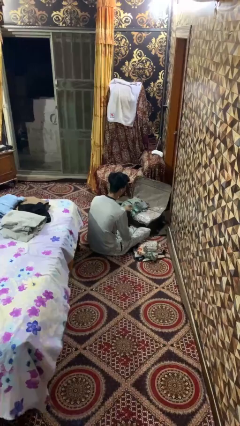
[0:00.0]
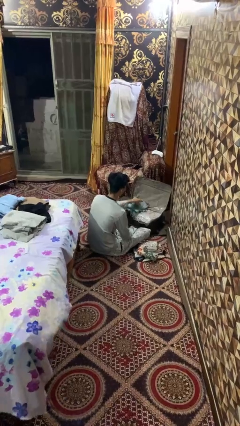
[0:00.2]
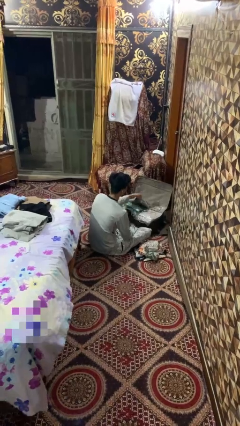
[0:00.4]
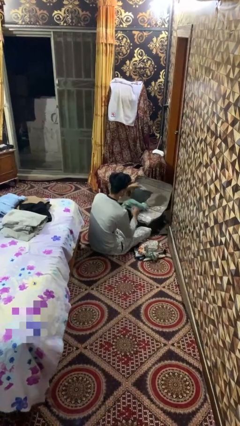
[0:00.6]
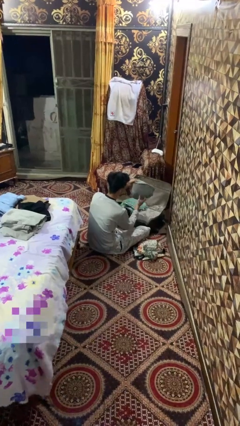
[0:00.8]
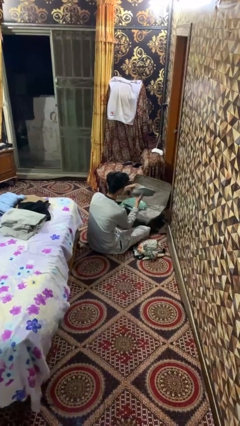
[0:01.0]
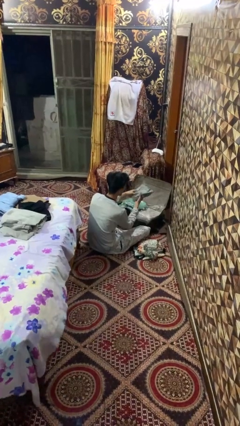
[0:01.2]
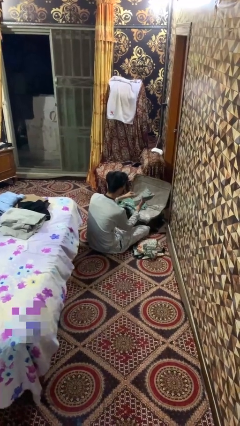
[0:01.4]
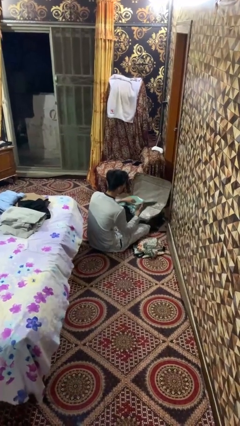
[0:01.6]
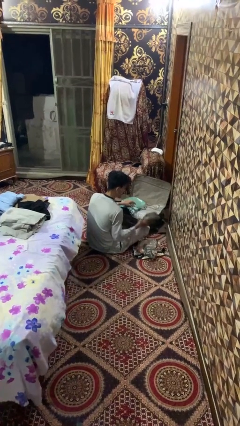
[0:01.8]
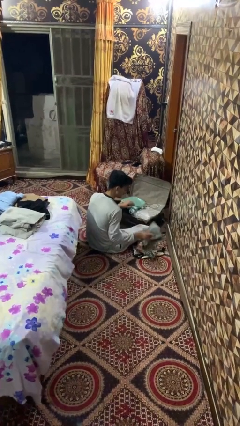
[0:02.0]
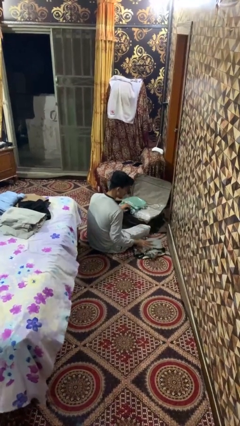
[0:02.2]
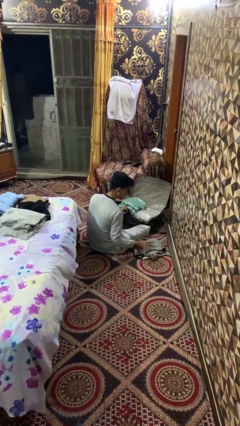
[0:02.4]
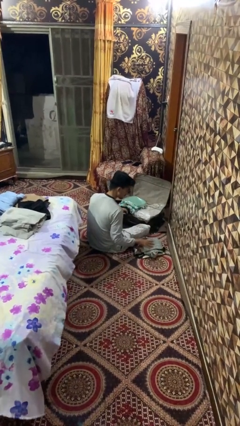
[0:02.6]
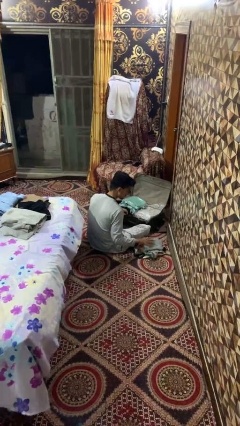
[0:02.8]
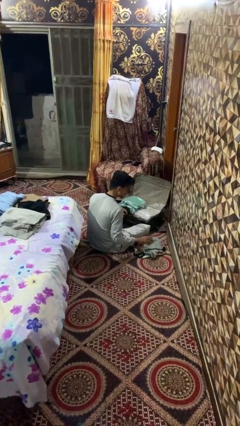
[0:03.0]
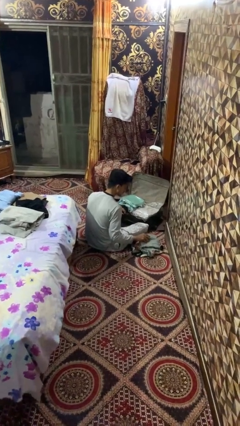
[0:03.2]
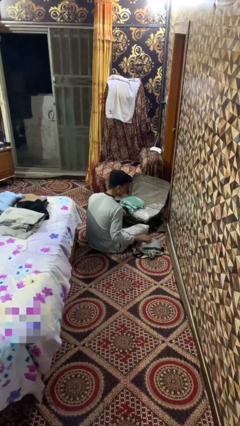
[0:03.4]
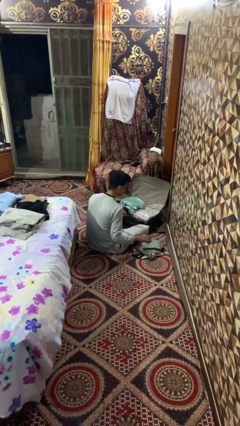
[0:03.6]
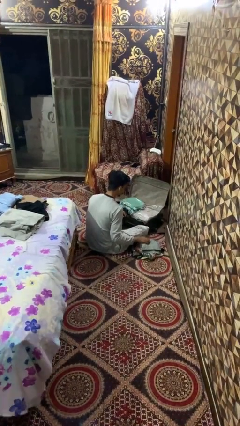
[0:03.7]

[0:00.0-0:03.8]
person unloads clothes from suitcase

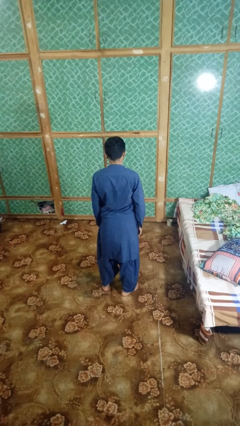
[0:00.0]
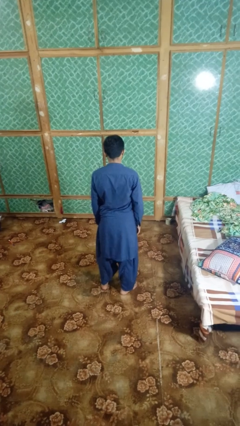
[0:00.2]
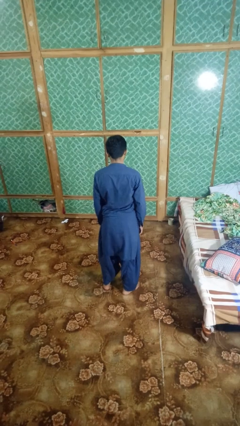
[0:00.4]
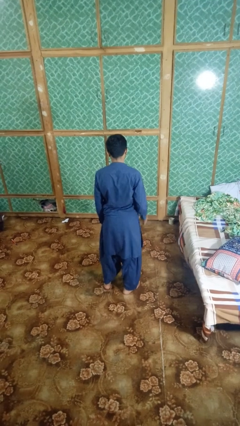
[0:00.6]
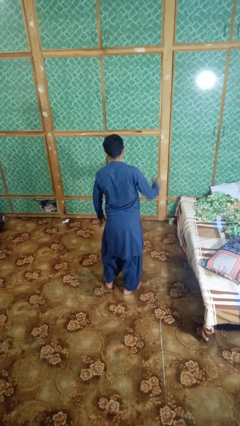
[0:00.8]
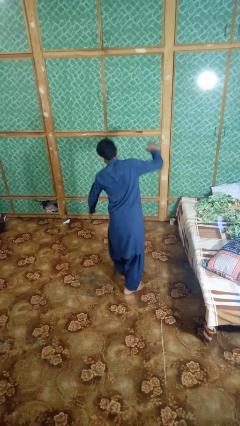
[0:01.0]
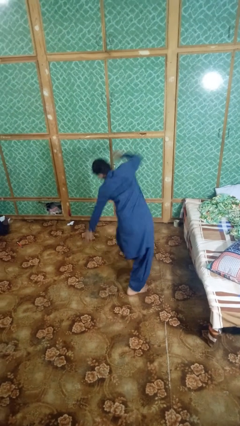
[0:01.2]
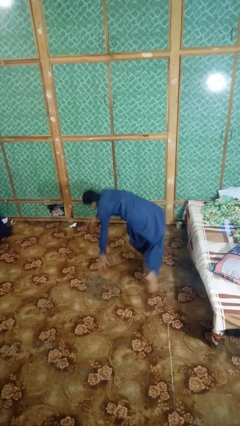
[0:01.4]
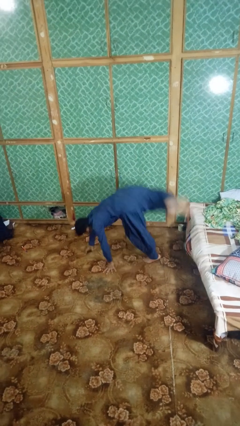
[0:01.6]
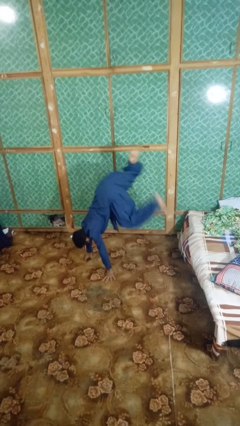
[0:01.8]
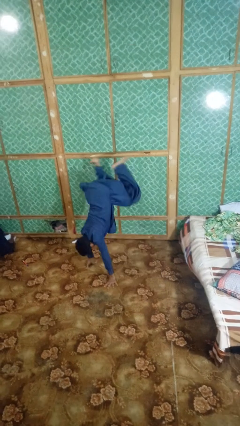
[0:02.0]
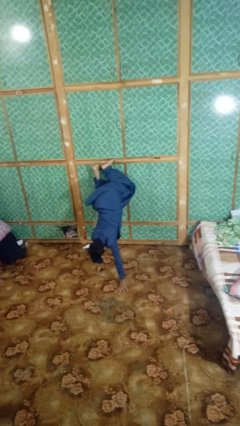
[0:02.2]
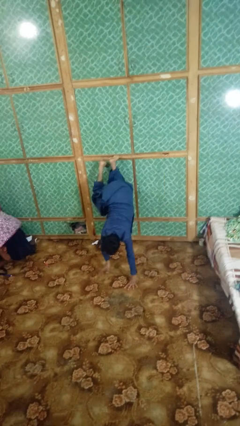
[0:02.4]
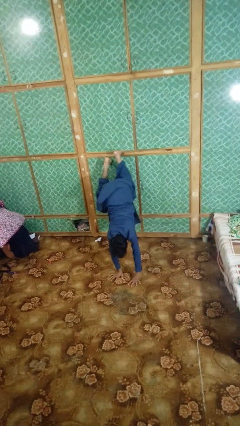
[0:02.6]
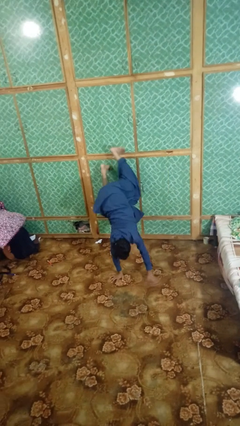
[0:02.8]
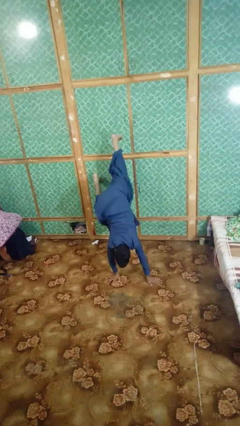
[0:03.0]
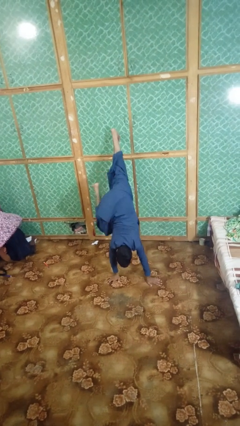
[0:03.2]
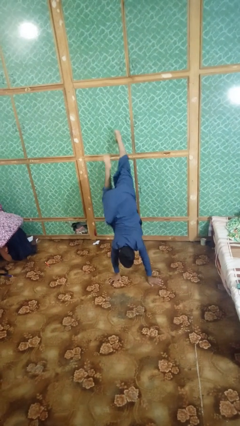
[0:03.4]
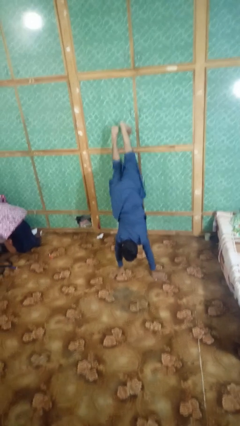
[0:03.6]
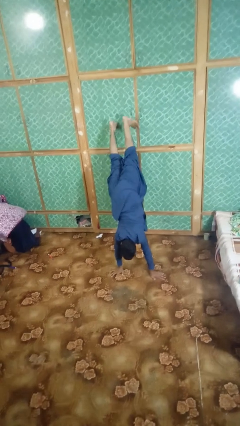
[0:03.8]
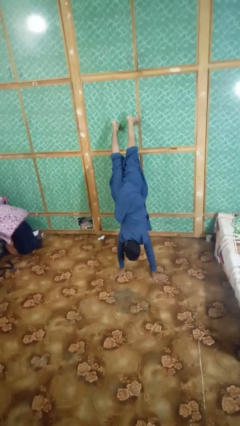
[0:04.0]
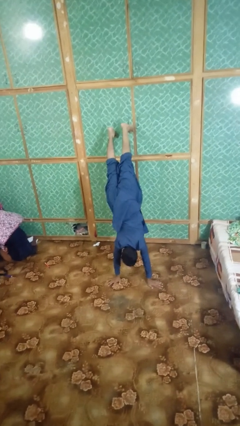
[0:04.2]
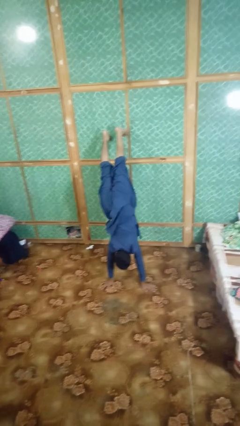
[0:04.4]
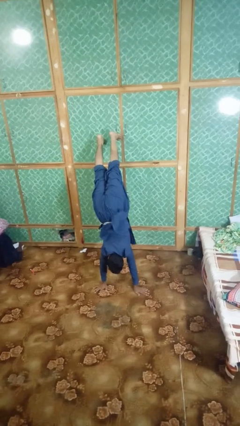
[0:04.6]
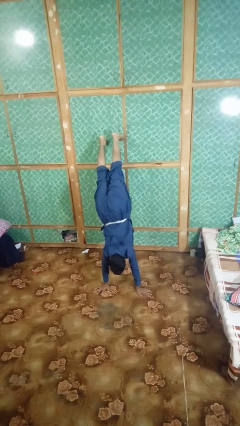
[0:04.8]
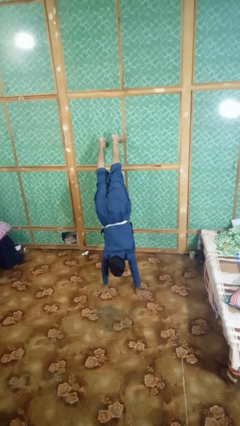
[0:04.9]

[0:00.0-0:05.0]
person handstand

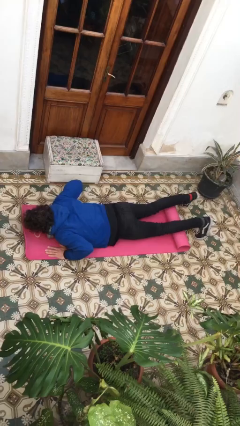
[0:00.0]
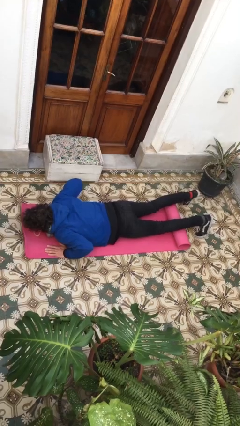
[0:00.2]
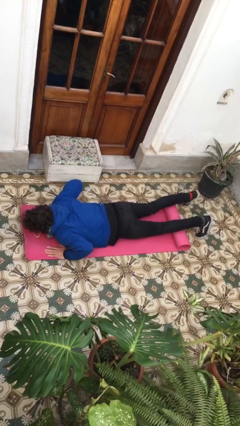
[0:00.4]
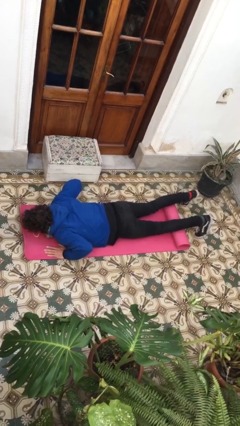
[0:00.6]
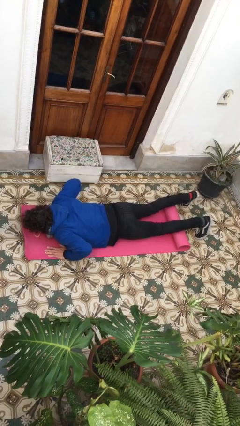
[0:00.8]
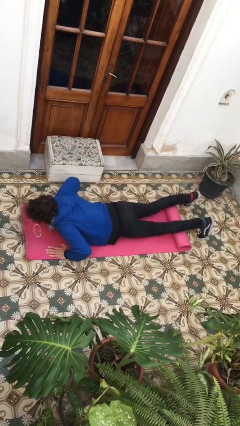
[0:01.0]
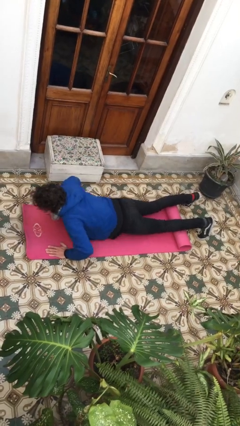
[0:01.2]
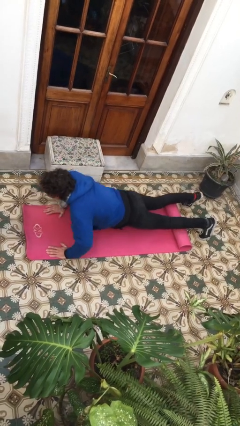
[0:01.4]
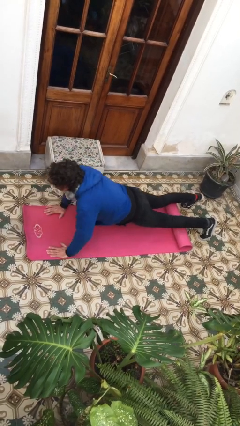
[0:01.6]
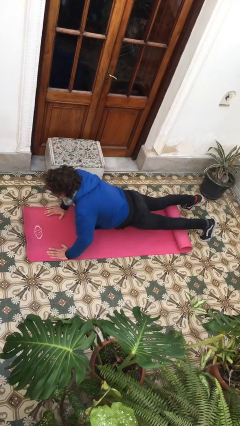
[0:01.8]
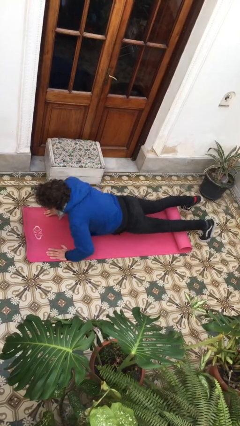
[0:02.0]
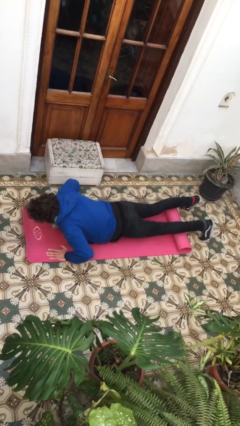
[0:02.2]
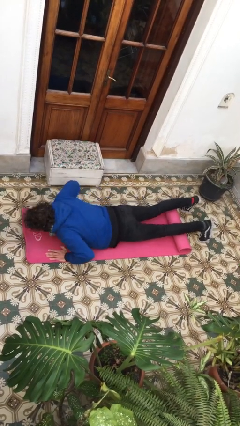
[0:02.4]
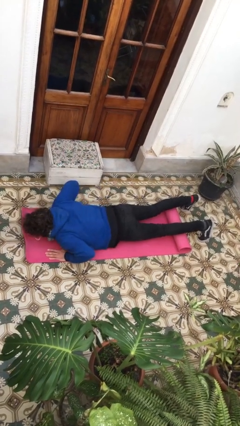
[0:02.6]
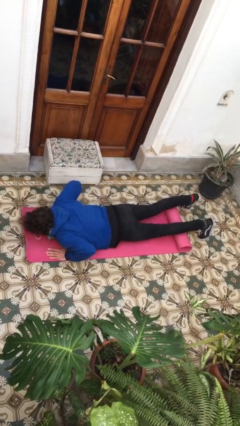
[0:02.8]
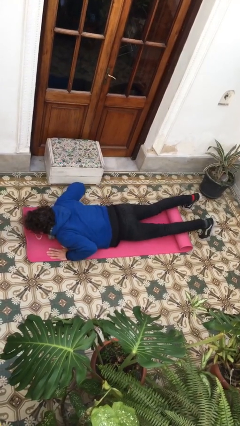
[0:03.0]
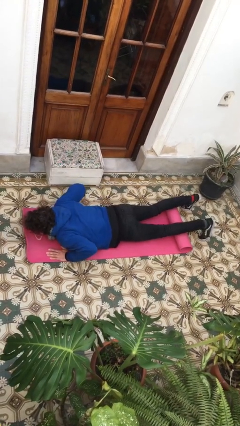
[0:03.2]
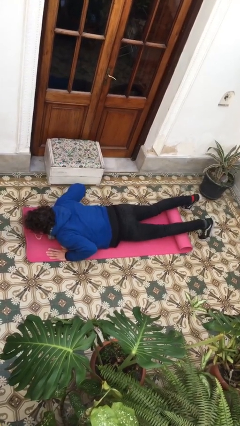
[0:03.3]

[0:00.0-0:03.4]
person exercises with pushup

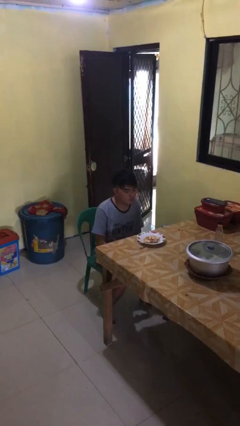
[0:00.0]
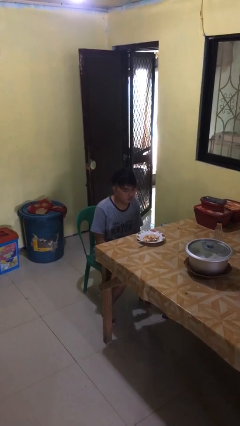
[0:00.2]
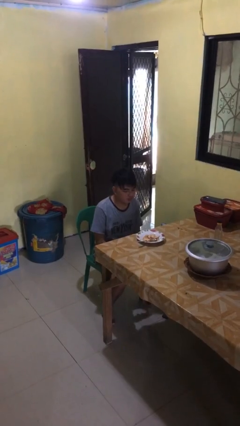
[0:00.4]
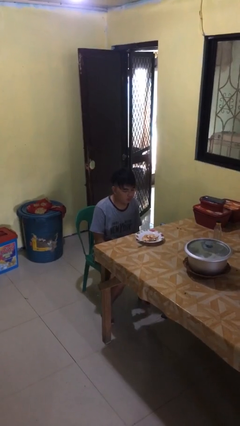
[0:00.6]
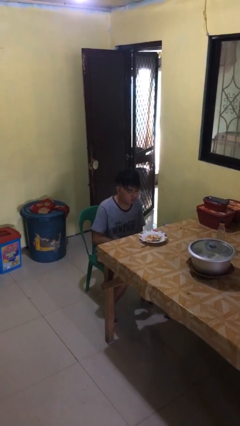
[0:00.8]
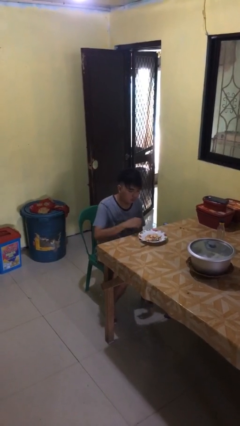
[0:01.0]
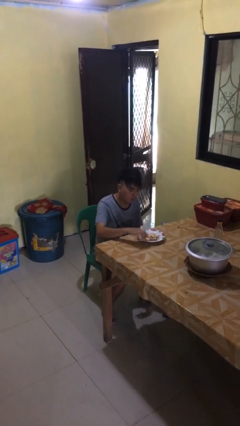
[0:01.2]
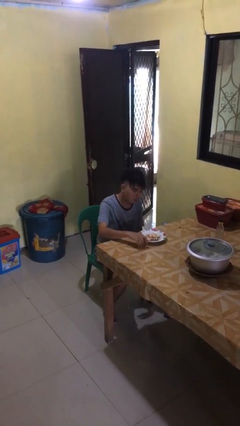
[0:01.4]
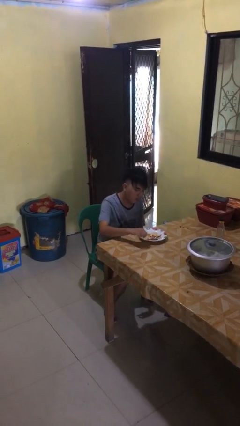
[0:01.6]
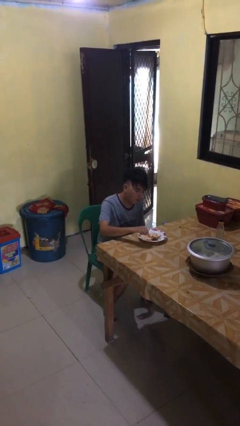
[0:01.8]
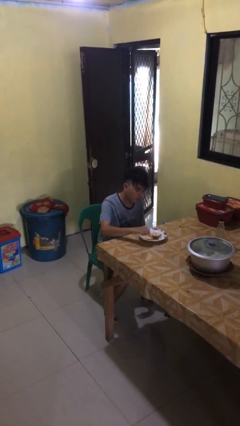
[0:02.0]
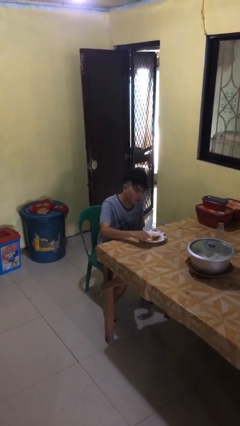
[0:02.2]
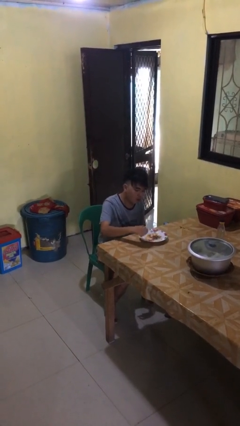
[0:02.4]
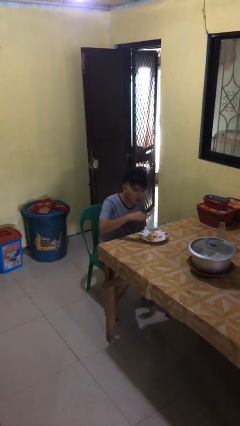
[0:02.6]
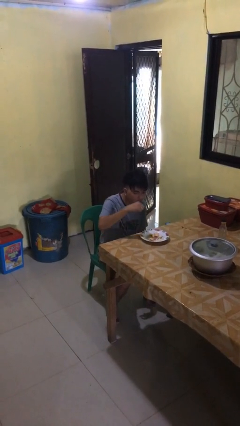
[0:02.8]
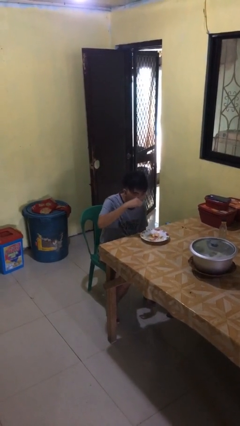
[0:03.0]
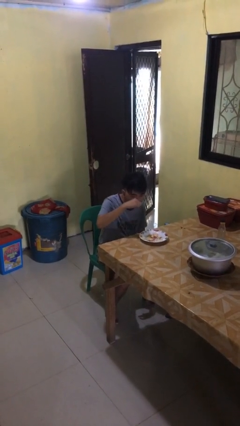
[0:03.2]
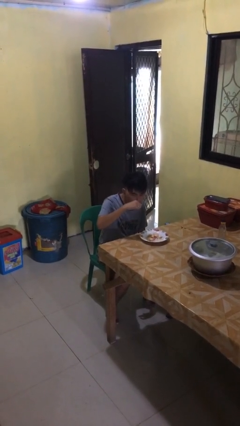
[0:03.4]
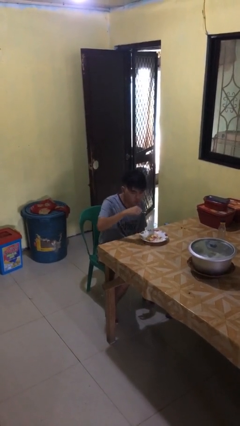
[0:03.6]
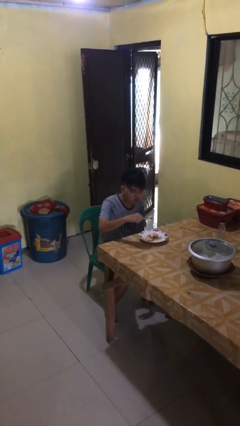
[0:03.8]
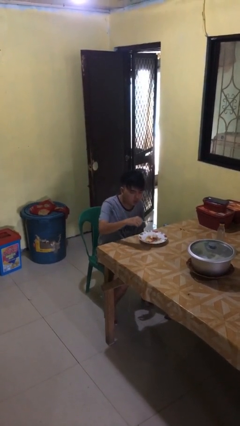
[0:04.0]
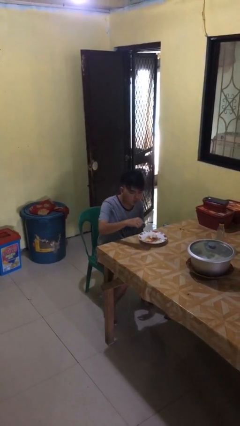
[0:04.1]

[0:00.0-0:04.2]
person eats with utensil

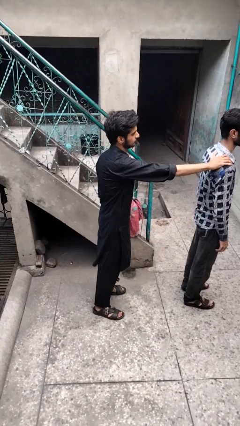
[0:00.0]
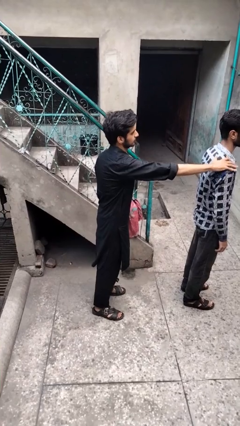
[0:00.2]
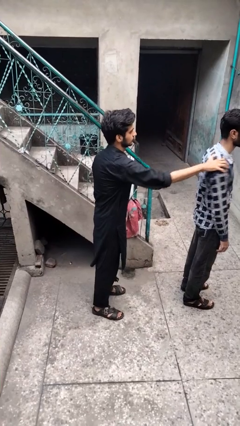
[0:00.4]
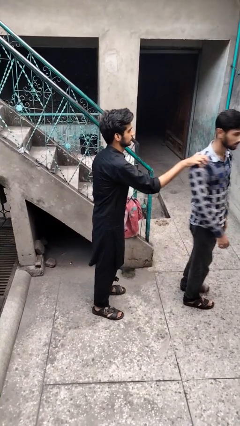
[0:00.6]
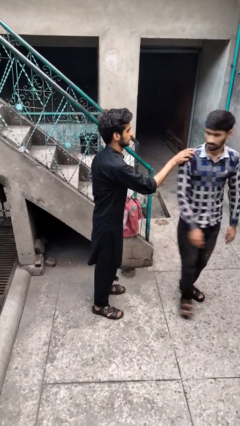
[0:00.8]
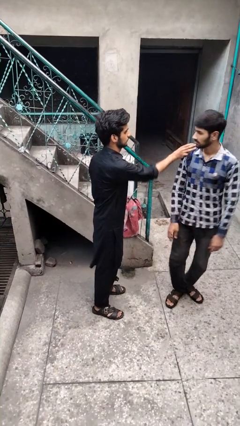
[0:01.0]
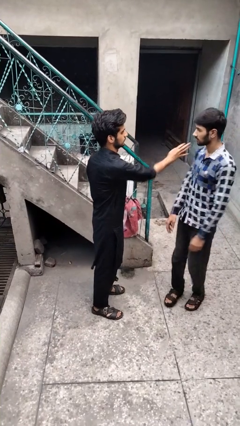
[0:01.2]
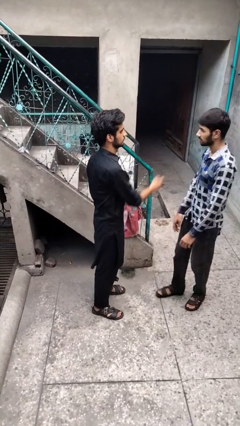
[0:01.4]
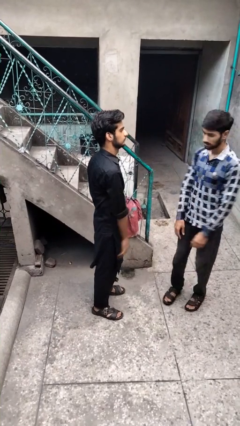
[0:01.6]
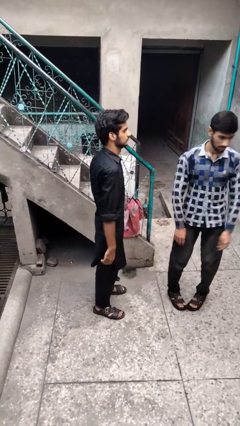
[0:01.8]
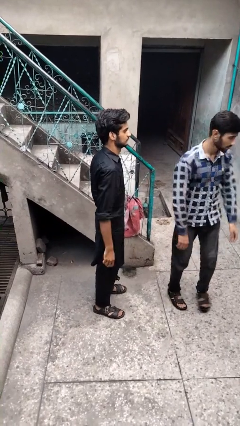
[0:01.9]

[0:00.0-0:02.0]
person spins person around
